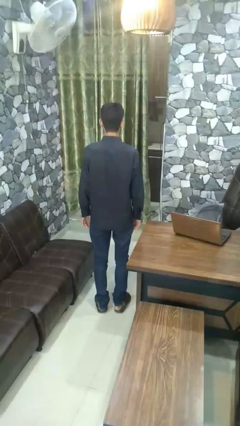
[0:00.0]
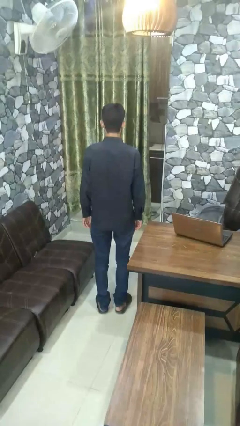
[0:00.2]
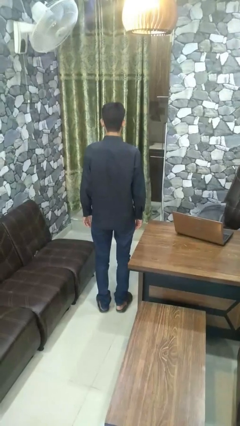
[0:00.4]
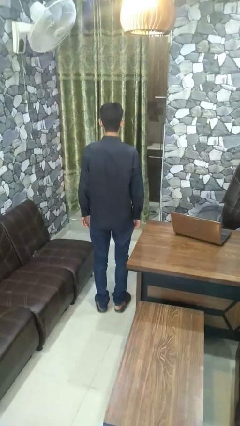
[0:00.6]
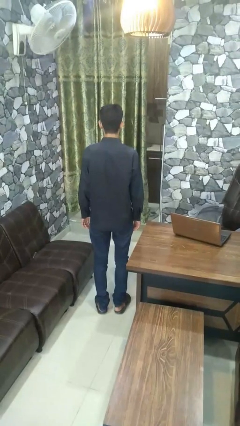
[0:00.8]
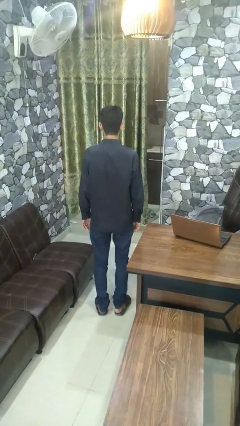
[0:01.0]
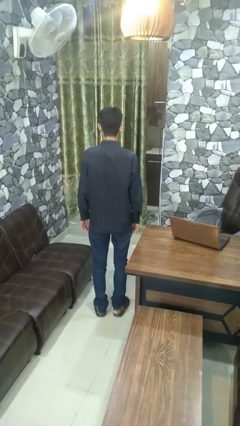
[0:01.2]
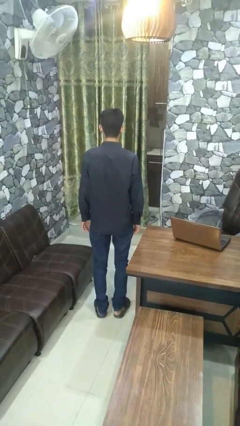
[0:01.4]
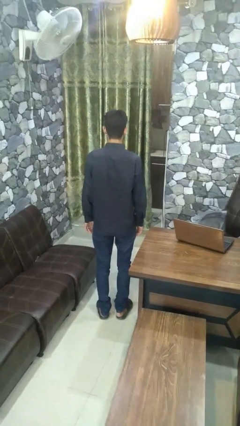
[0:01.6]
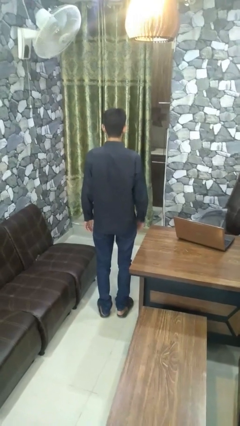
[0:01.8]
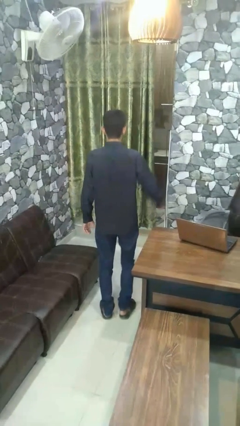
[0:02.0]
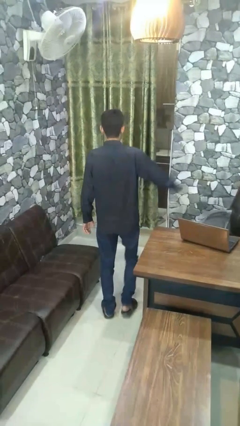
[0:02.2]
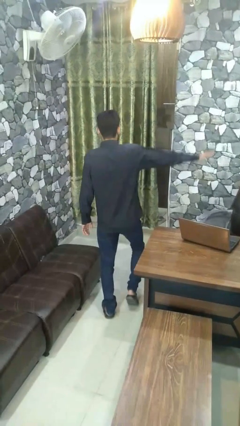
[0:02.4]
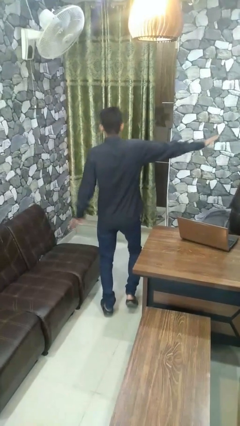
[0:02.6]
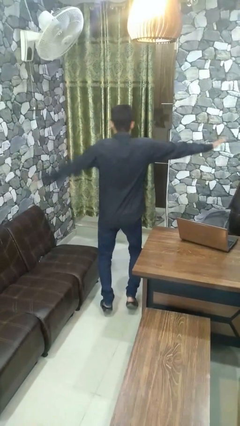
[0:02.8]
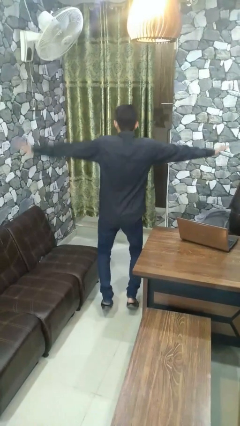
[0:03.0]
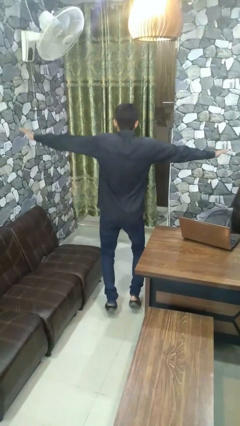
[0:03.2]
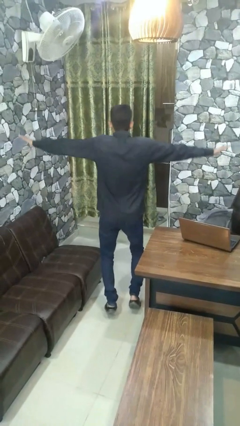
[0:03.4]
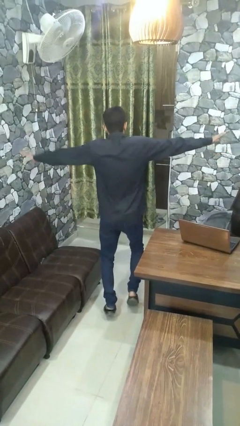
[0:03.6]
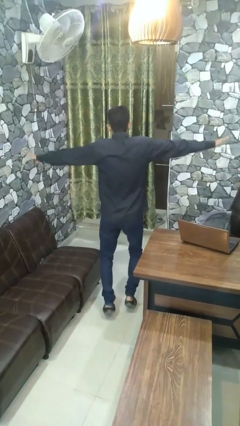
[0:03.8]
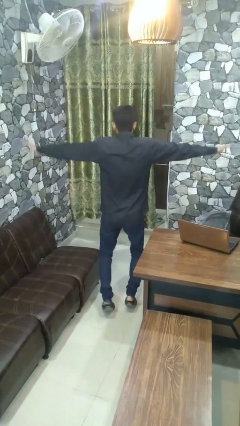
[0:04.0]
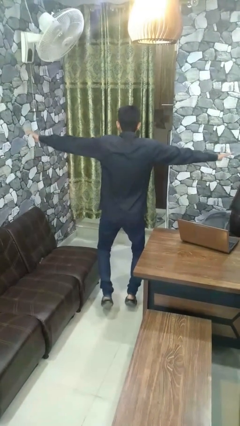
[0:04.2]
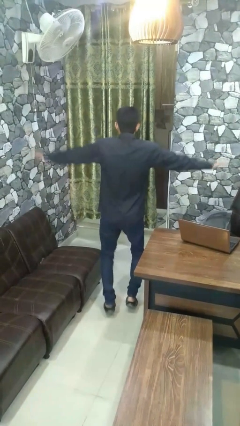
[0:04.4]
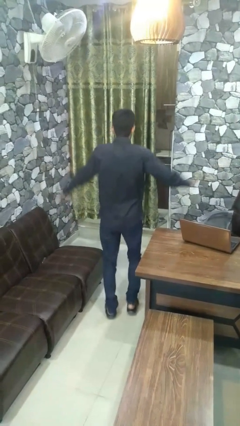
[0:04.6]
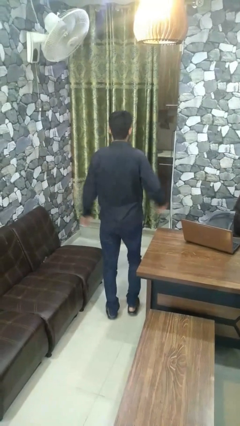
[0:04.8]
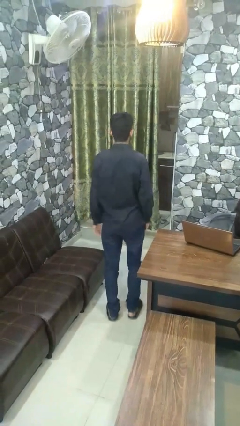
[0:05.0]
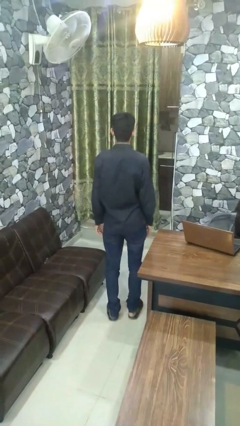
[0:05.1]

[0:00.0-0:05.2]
person walks tiptoe

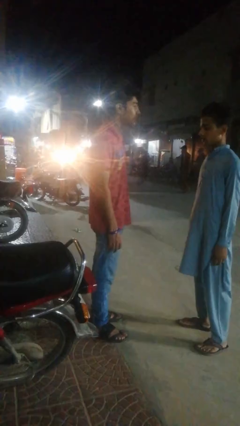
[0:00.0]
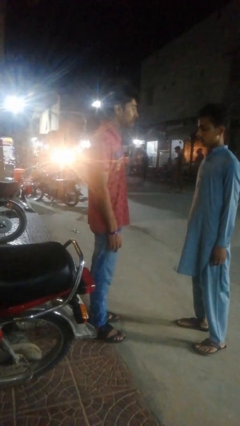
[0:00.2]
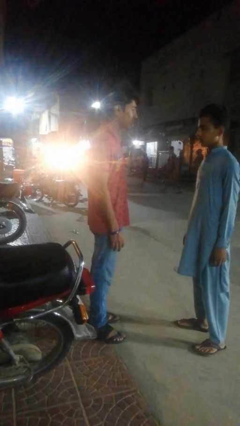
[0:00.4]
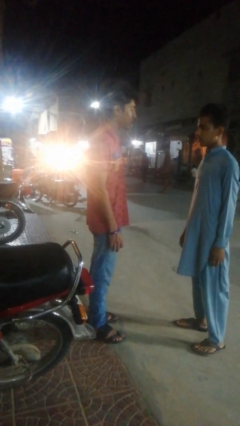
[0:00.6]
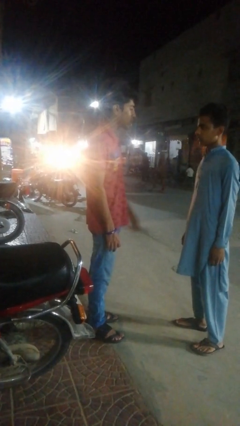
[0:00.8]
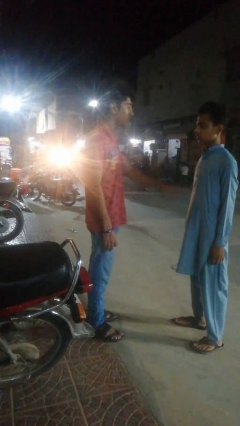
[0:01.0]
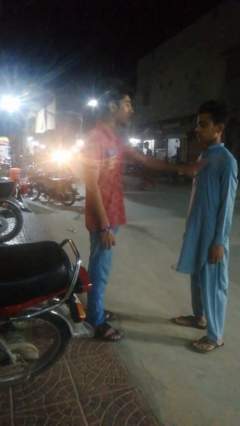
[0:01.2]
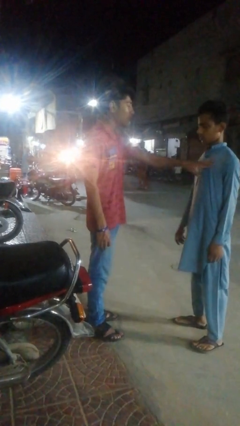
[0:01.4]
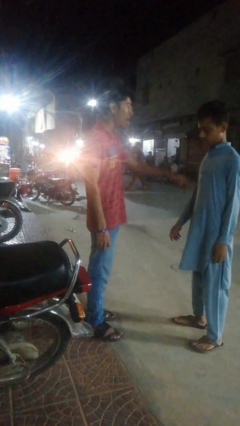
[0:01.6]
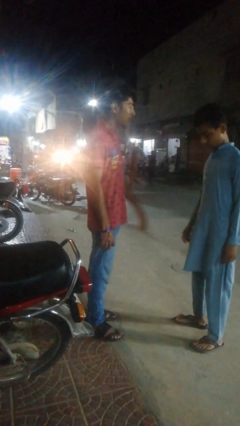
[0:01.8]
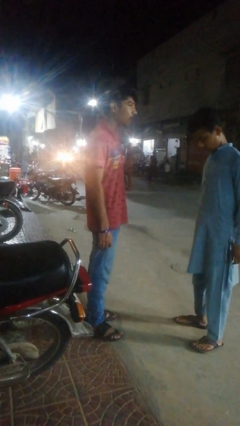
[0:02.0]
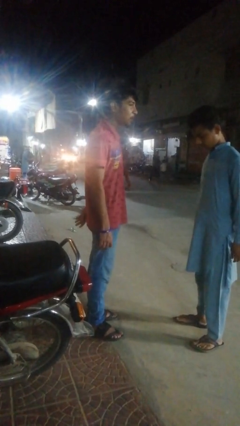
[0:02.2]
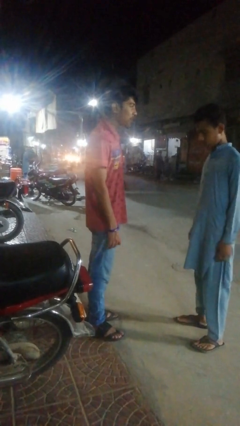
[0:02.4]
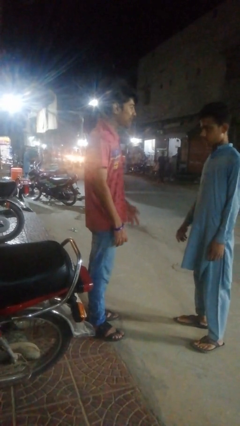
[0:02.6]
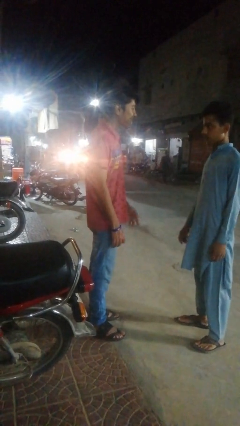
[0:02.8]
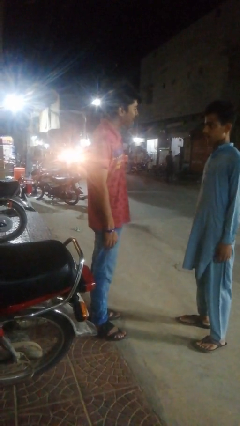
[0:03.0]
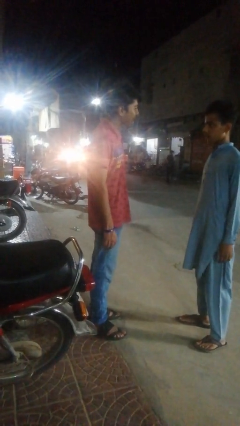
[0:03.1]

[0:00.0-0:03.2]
person shoves person

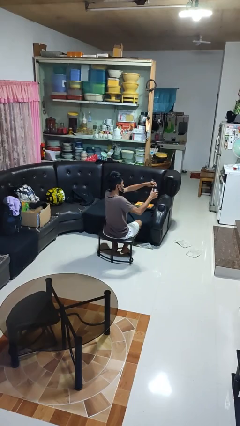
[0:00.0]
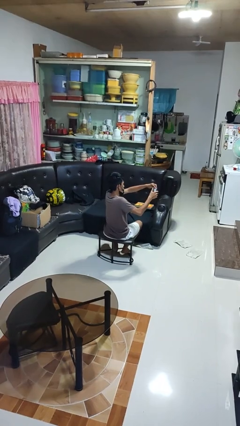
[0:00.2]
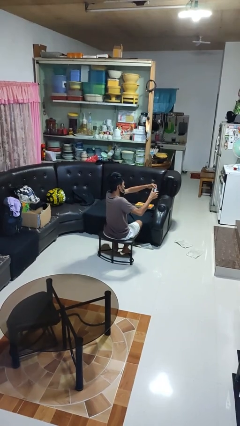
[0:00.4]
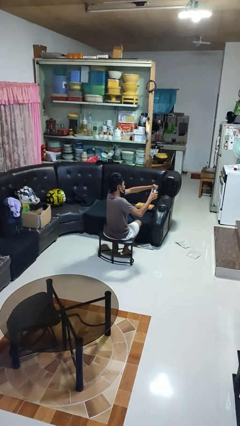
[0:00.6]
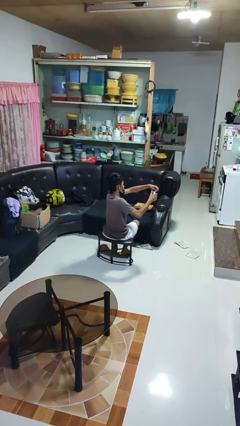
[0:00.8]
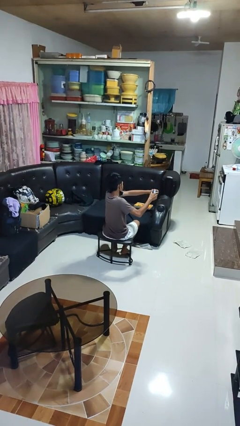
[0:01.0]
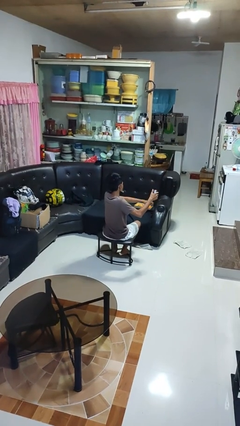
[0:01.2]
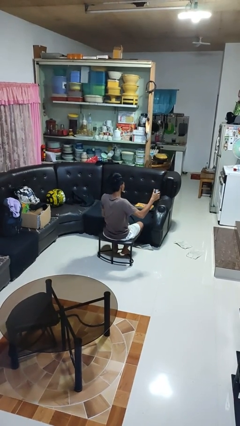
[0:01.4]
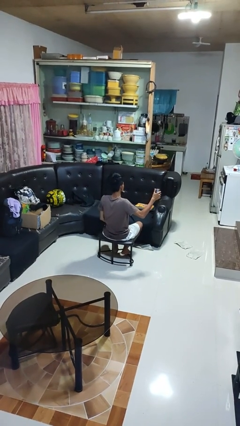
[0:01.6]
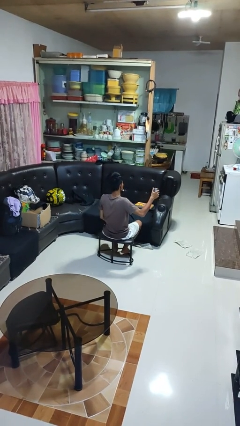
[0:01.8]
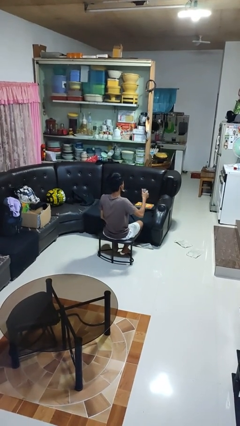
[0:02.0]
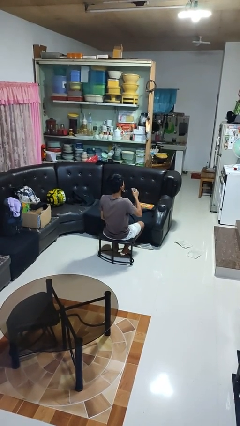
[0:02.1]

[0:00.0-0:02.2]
person opens beverage can

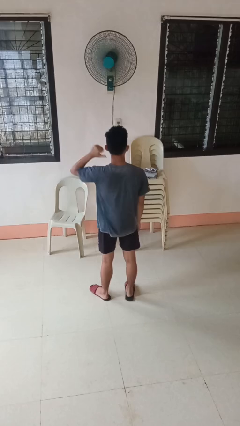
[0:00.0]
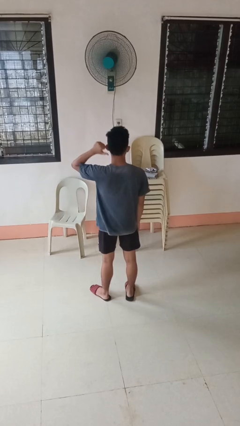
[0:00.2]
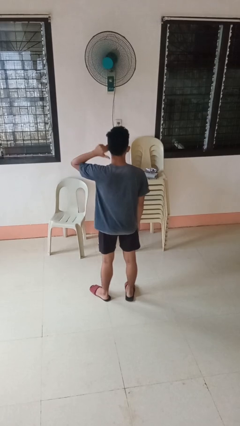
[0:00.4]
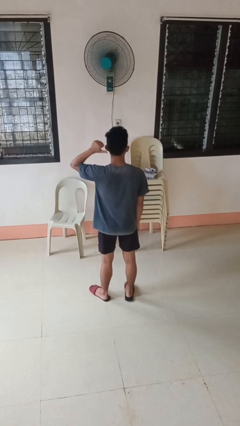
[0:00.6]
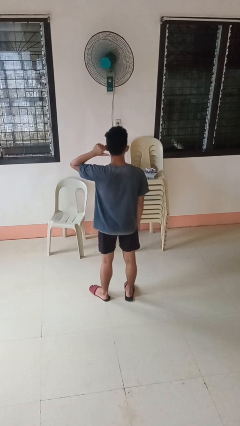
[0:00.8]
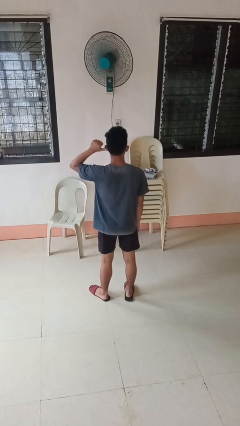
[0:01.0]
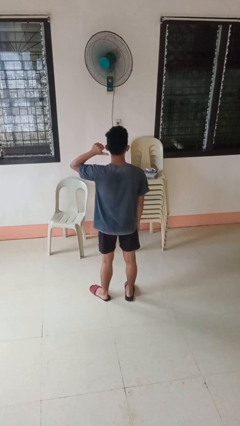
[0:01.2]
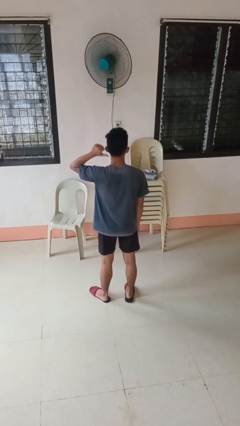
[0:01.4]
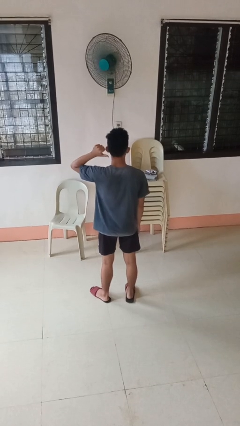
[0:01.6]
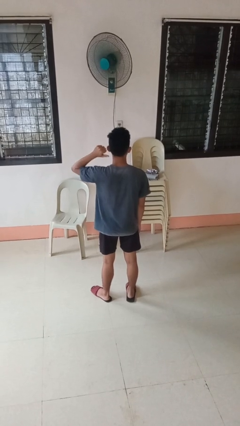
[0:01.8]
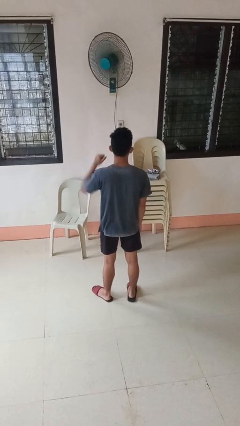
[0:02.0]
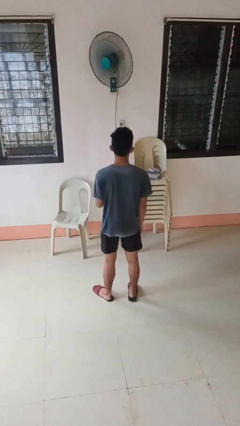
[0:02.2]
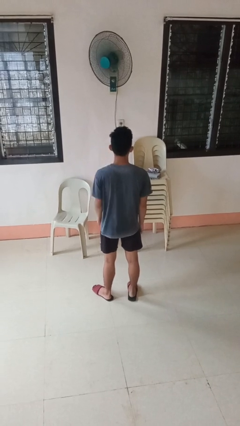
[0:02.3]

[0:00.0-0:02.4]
person gestures behind me

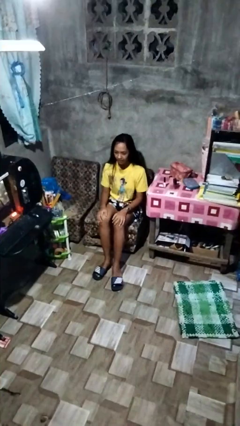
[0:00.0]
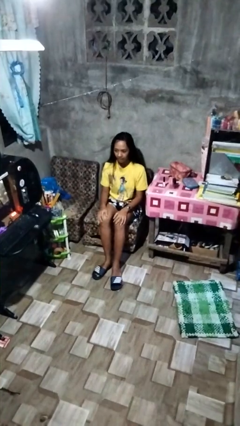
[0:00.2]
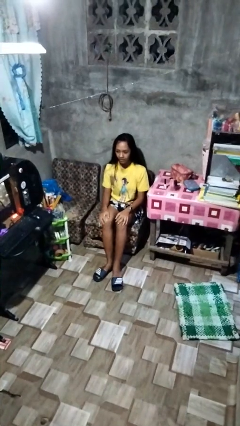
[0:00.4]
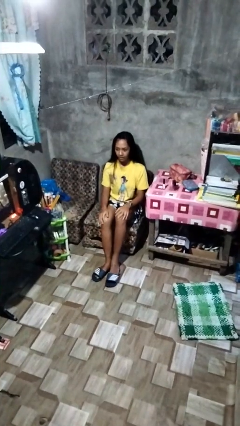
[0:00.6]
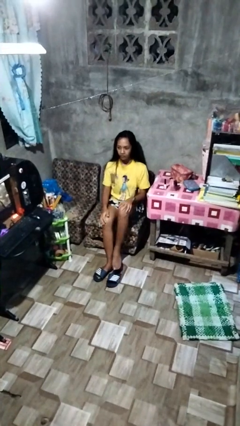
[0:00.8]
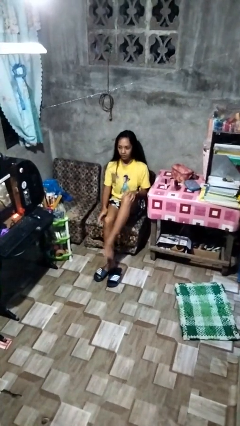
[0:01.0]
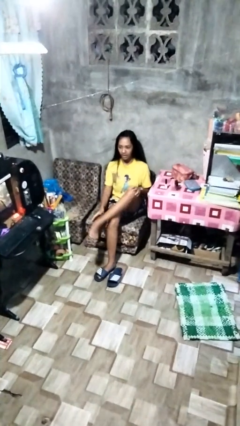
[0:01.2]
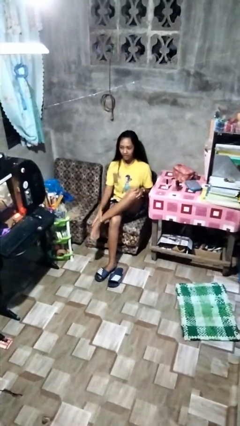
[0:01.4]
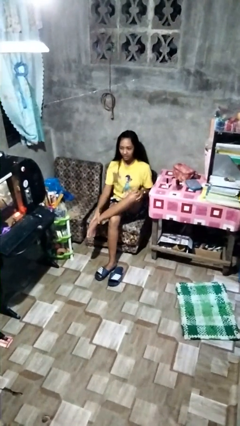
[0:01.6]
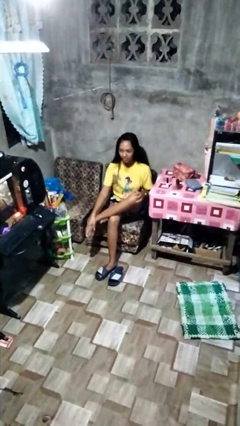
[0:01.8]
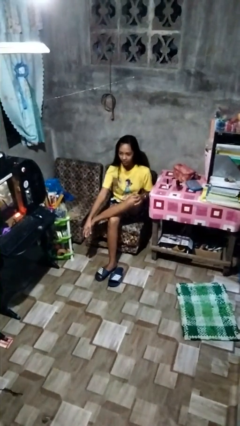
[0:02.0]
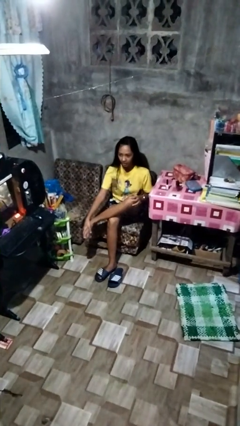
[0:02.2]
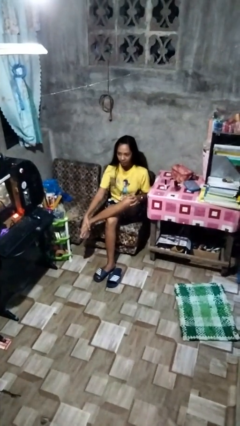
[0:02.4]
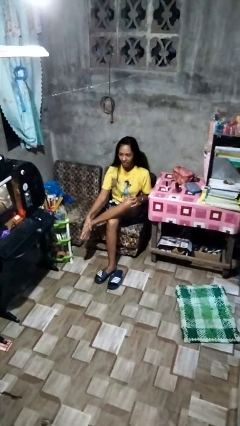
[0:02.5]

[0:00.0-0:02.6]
person rubs foot

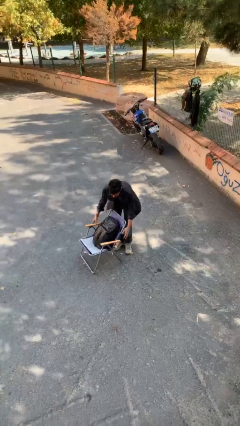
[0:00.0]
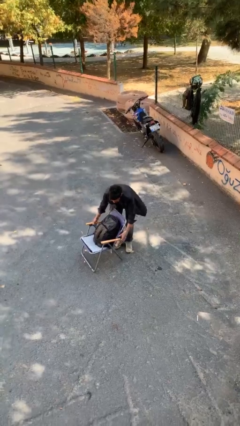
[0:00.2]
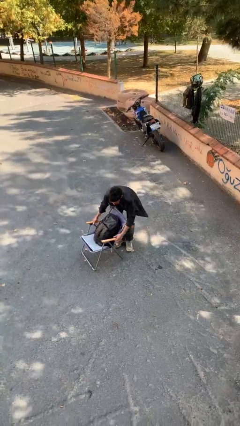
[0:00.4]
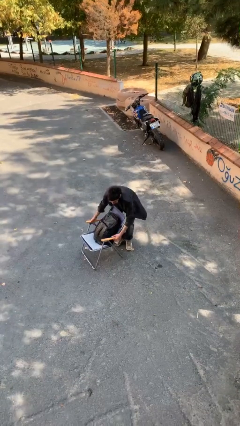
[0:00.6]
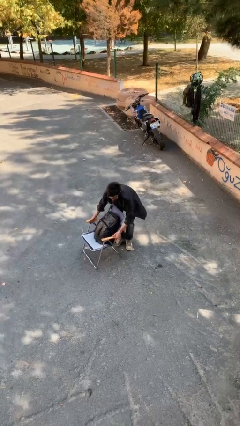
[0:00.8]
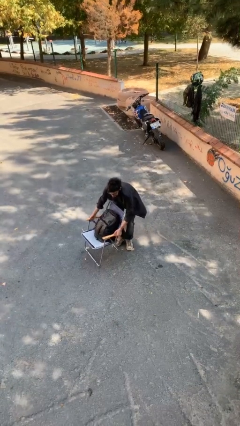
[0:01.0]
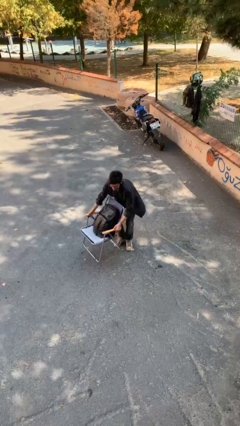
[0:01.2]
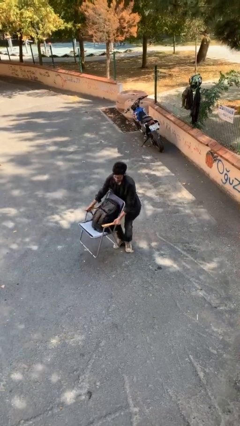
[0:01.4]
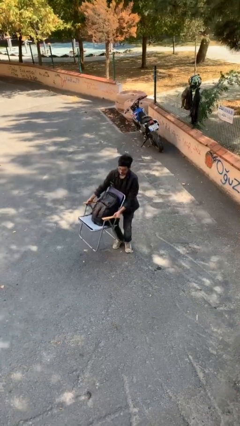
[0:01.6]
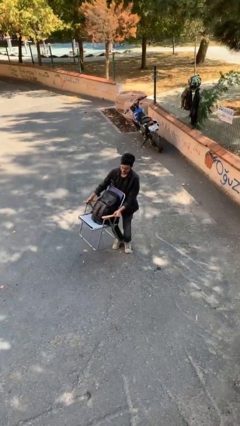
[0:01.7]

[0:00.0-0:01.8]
person picks up object from floor
